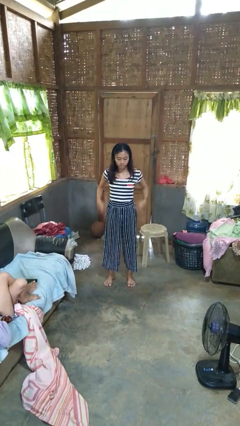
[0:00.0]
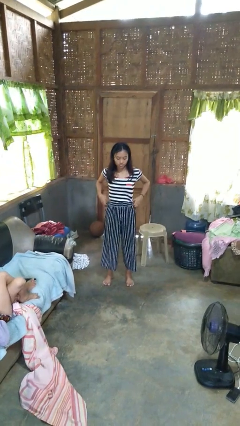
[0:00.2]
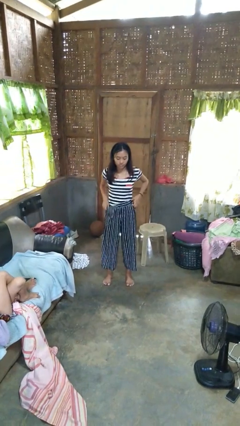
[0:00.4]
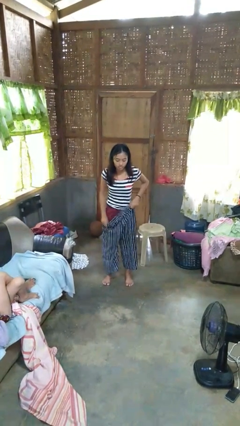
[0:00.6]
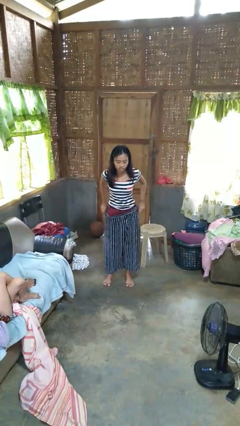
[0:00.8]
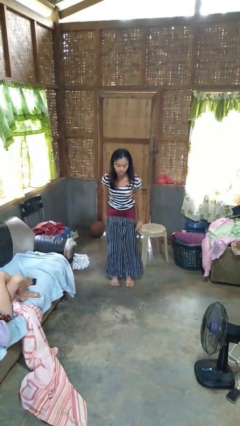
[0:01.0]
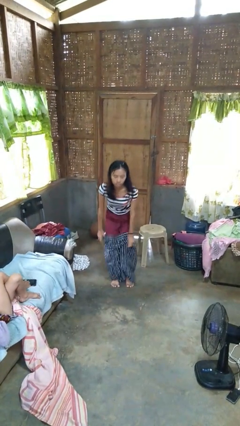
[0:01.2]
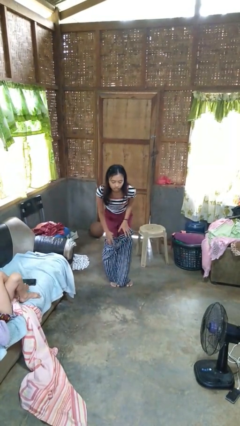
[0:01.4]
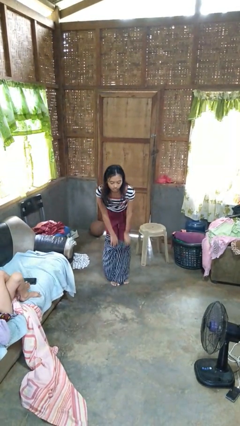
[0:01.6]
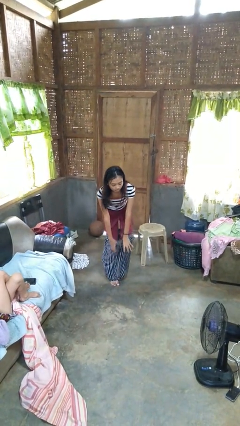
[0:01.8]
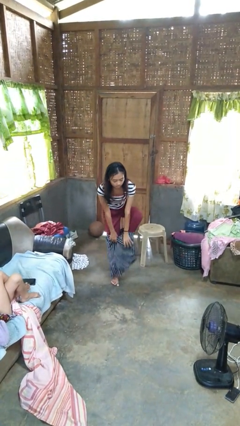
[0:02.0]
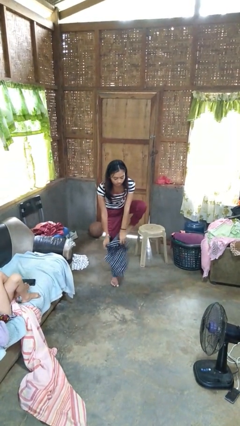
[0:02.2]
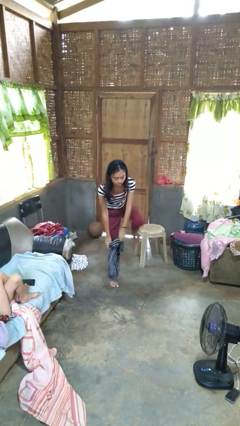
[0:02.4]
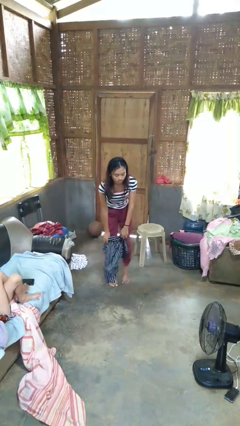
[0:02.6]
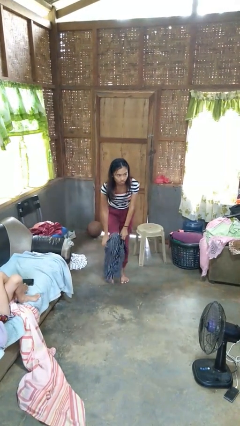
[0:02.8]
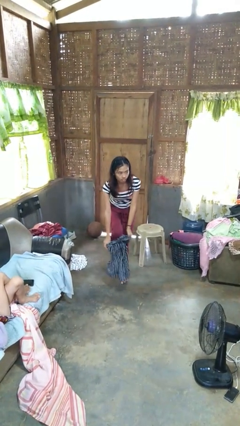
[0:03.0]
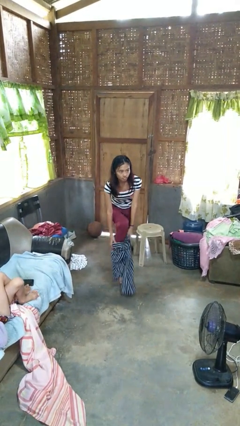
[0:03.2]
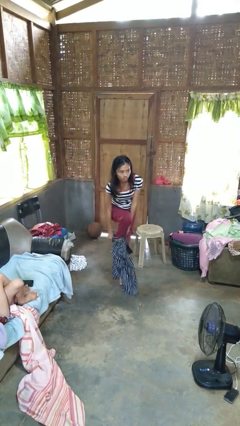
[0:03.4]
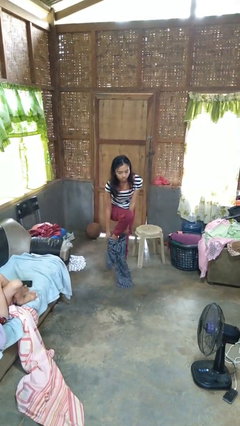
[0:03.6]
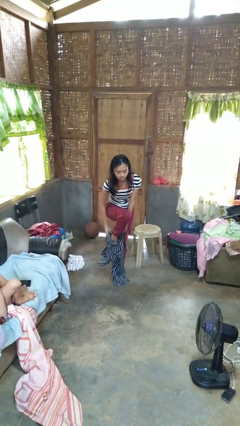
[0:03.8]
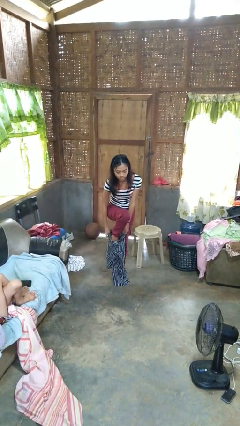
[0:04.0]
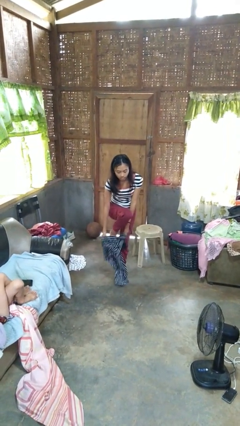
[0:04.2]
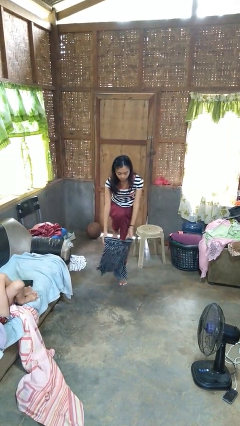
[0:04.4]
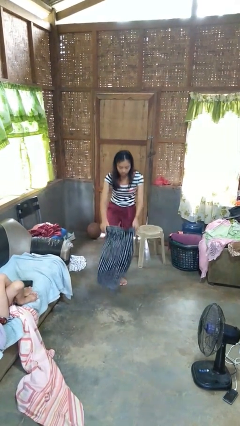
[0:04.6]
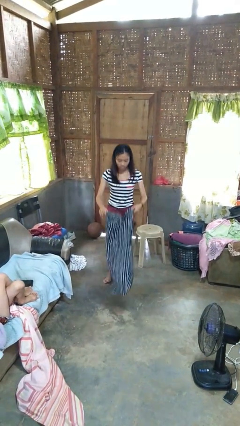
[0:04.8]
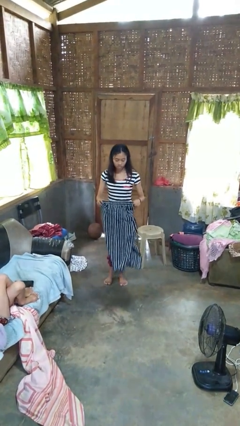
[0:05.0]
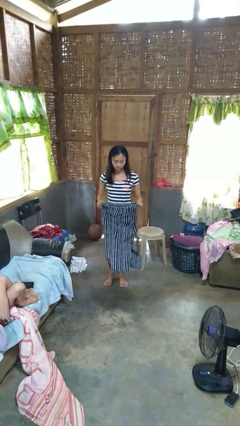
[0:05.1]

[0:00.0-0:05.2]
person takes off pants

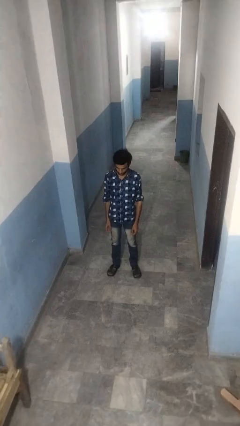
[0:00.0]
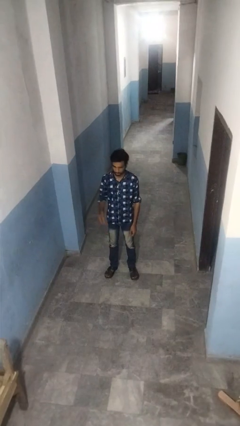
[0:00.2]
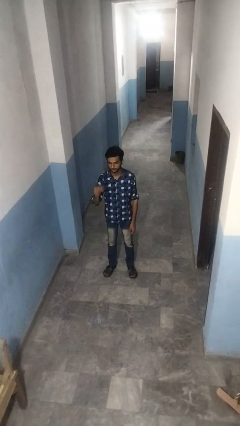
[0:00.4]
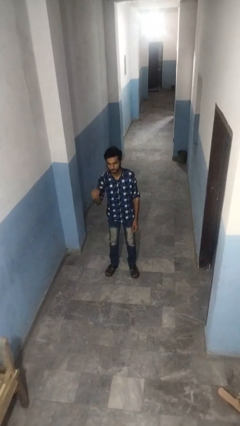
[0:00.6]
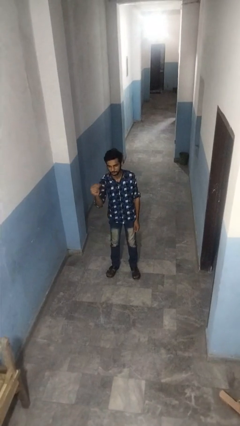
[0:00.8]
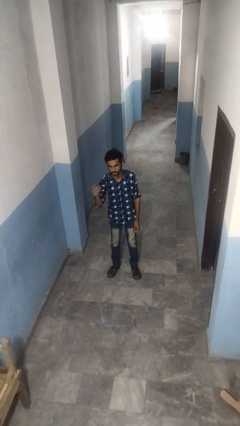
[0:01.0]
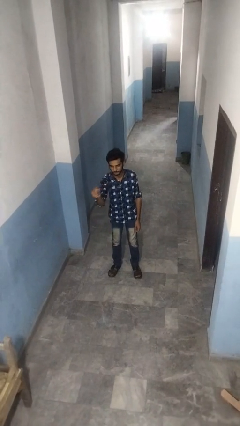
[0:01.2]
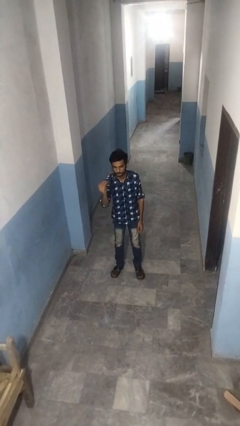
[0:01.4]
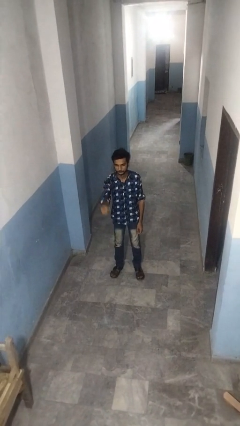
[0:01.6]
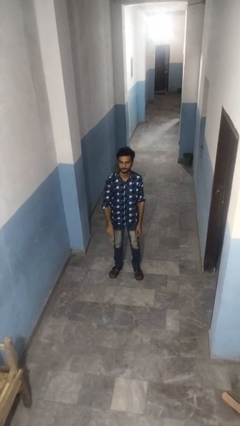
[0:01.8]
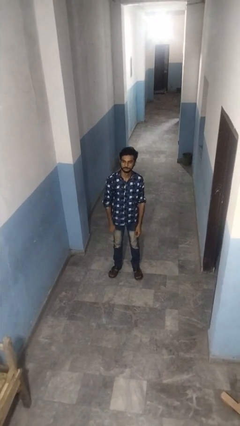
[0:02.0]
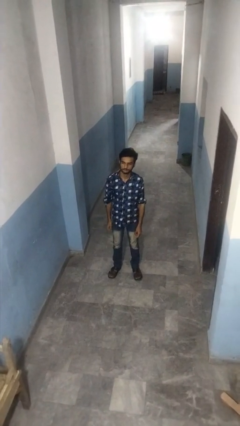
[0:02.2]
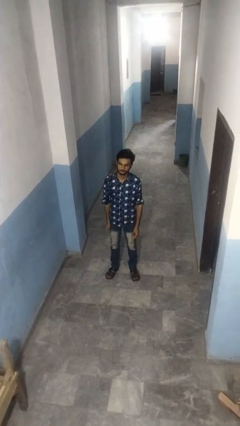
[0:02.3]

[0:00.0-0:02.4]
person snaps fingers

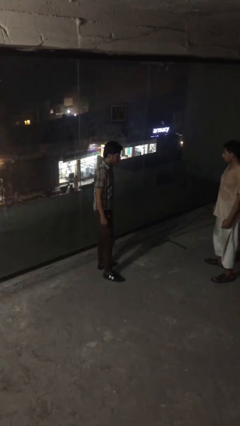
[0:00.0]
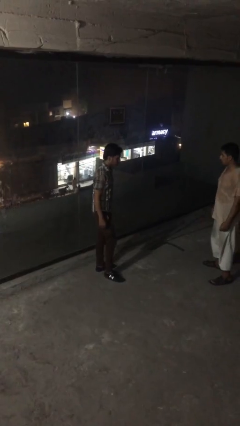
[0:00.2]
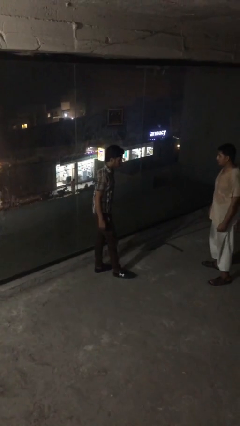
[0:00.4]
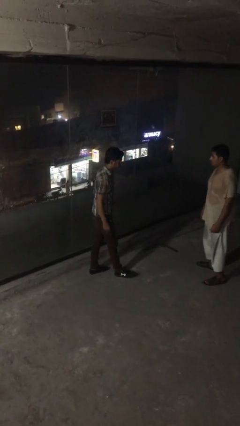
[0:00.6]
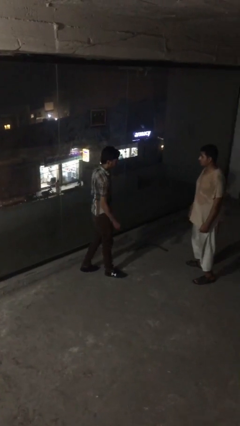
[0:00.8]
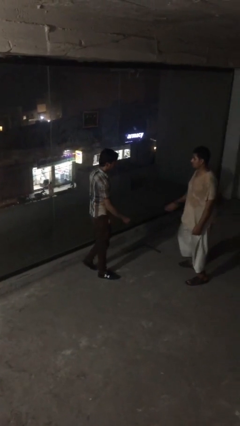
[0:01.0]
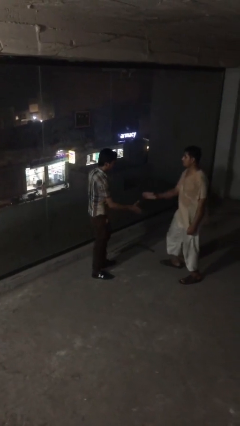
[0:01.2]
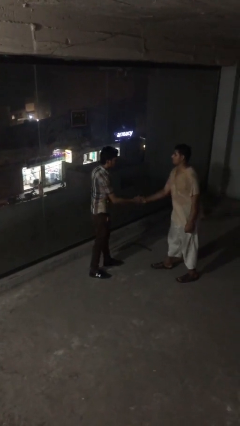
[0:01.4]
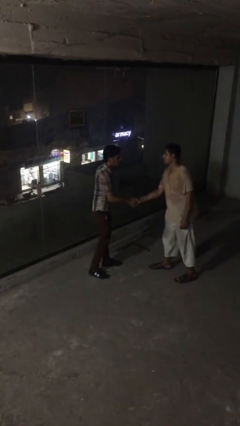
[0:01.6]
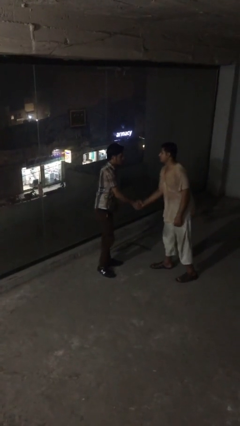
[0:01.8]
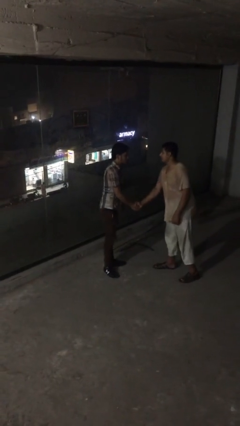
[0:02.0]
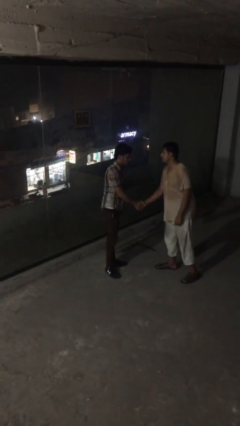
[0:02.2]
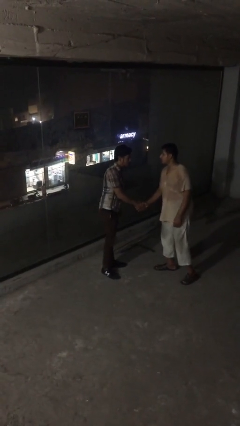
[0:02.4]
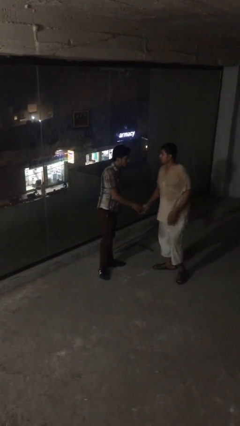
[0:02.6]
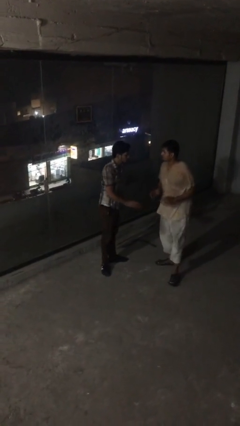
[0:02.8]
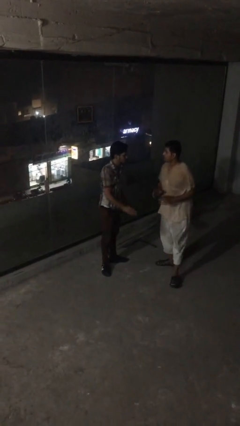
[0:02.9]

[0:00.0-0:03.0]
person shakes hand

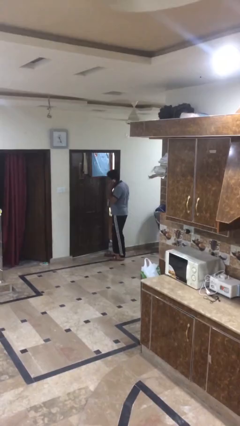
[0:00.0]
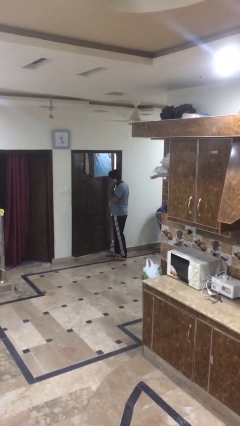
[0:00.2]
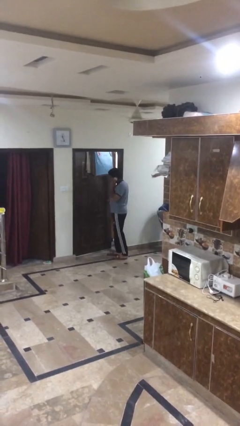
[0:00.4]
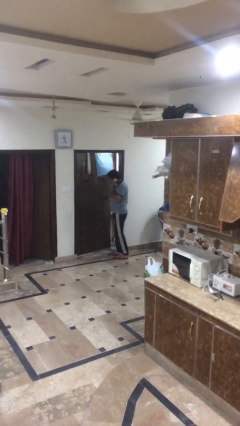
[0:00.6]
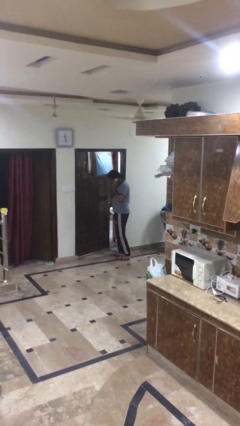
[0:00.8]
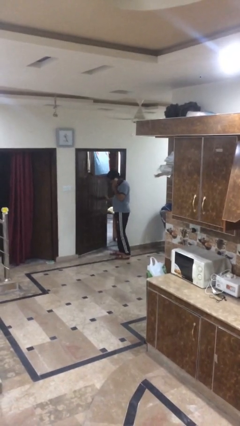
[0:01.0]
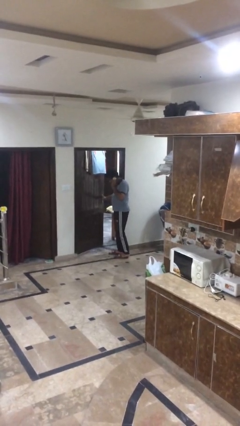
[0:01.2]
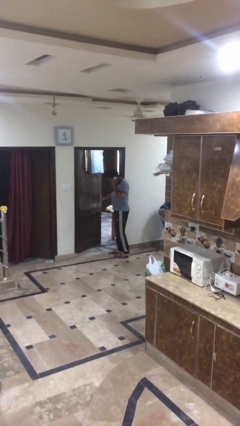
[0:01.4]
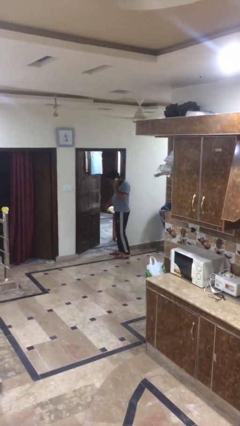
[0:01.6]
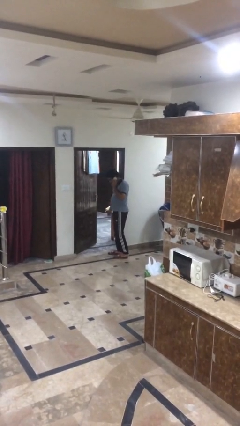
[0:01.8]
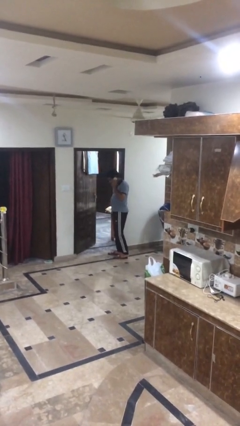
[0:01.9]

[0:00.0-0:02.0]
person opens facility door

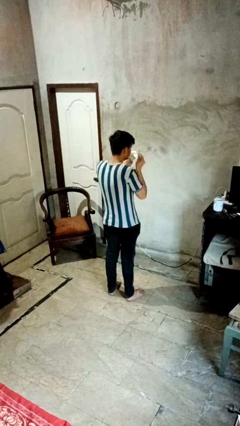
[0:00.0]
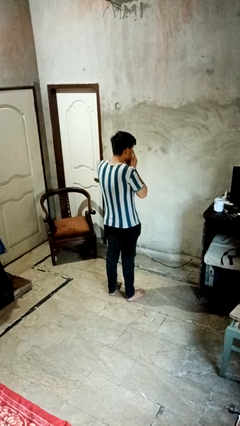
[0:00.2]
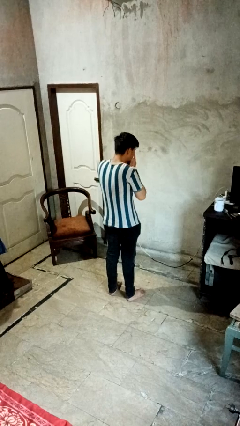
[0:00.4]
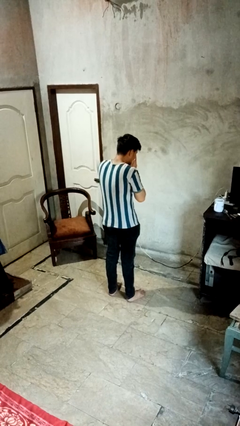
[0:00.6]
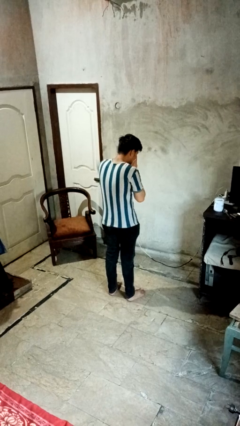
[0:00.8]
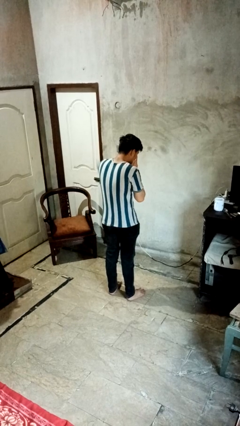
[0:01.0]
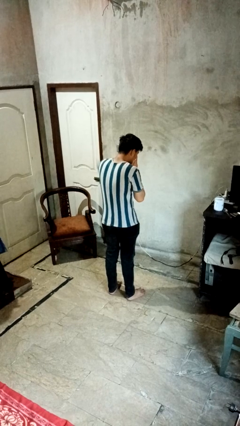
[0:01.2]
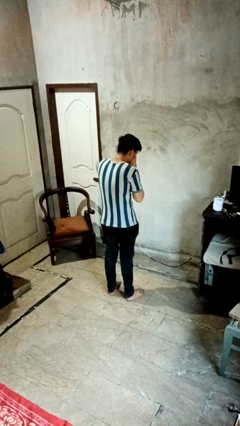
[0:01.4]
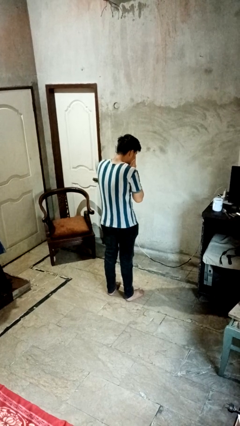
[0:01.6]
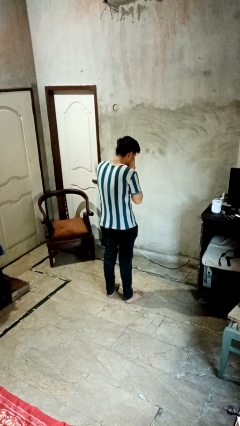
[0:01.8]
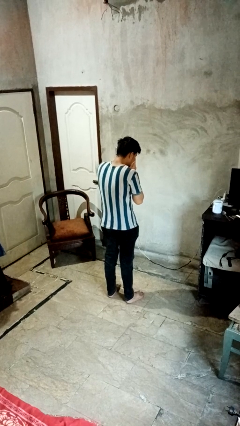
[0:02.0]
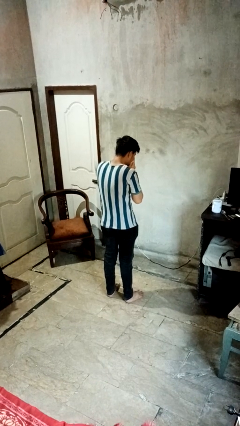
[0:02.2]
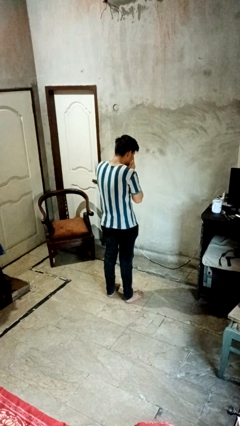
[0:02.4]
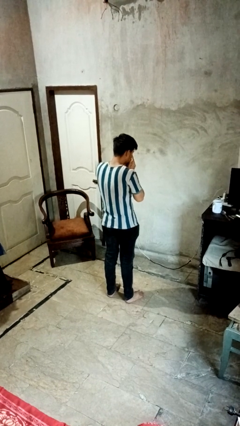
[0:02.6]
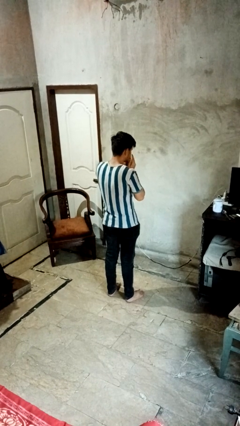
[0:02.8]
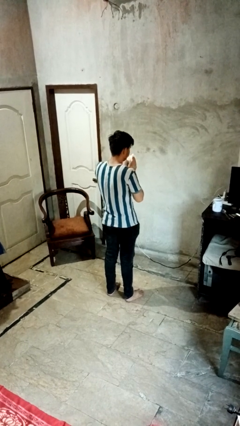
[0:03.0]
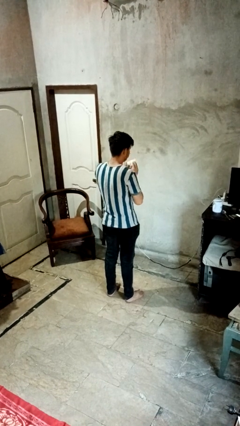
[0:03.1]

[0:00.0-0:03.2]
person blows nose

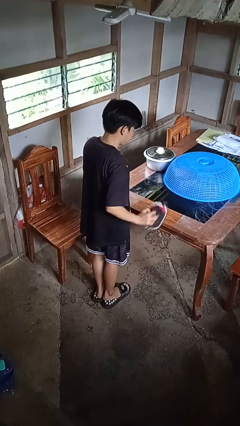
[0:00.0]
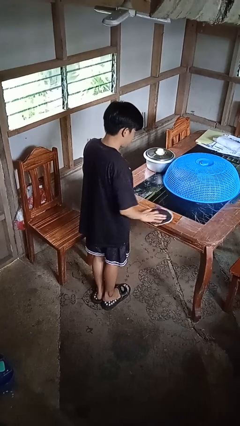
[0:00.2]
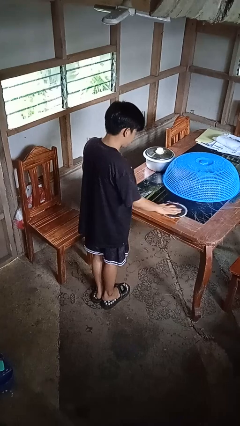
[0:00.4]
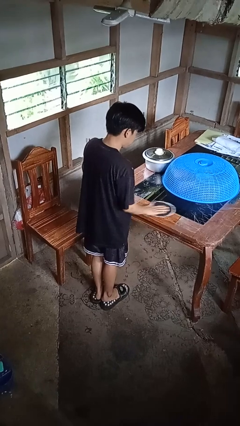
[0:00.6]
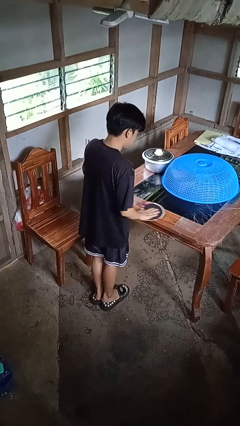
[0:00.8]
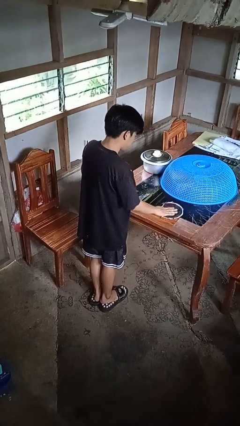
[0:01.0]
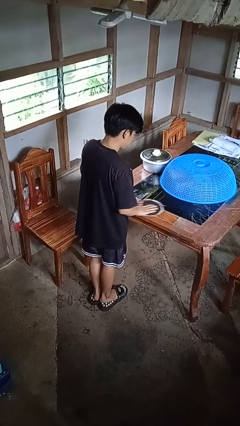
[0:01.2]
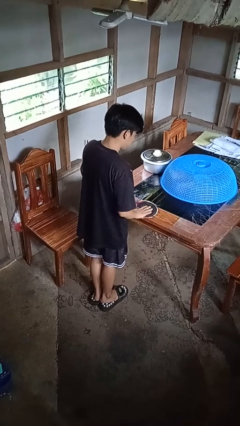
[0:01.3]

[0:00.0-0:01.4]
person cleans table with rag

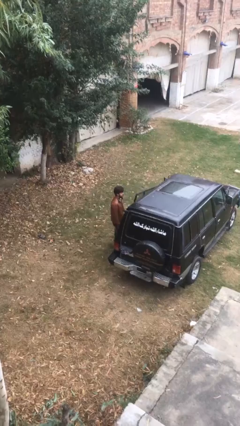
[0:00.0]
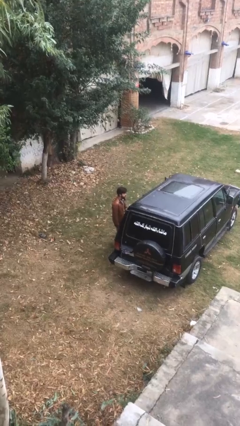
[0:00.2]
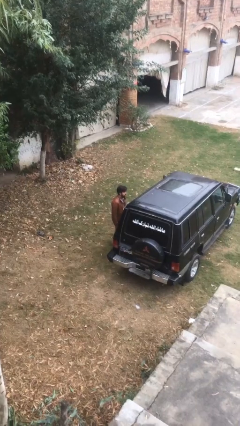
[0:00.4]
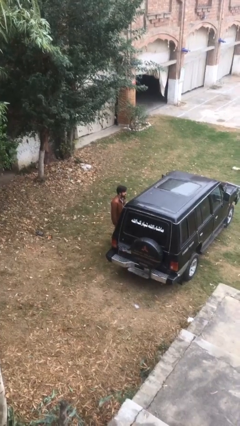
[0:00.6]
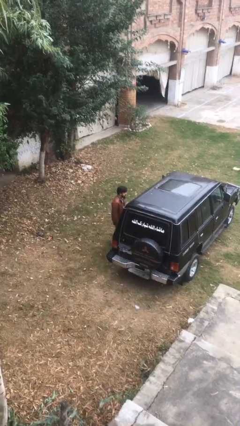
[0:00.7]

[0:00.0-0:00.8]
person closes car door
